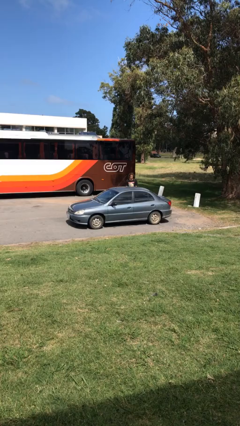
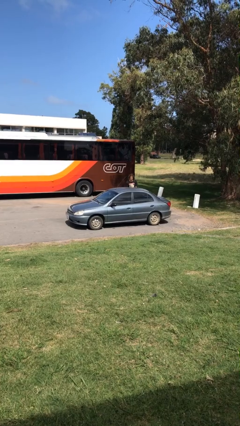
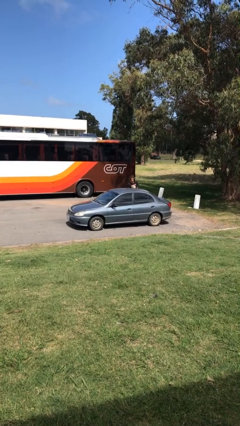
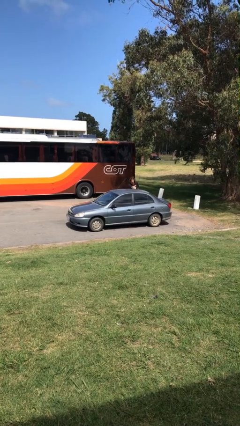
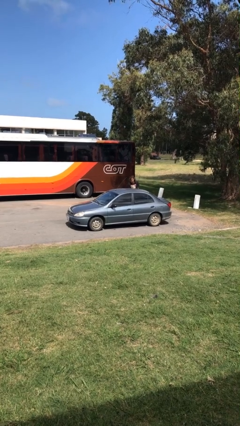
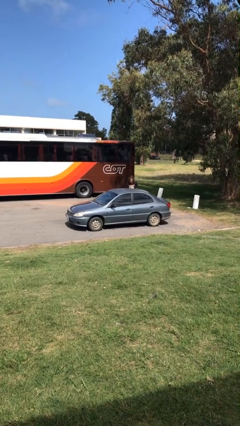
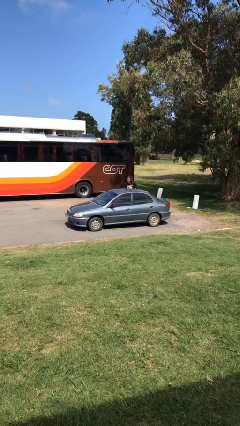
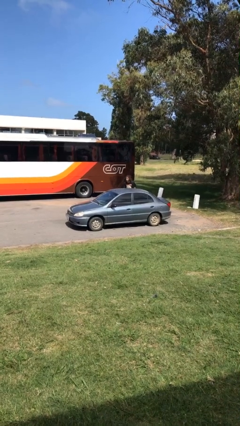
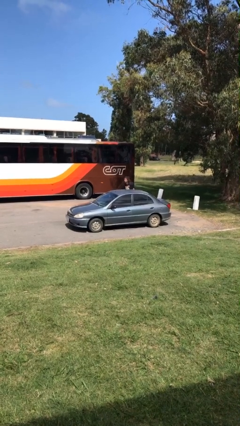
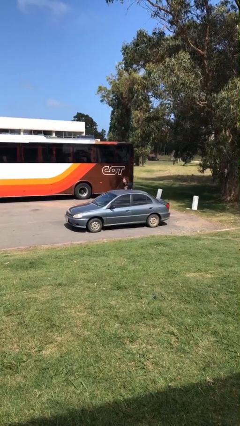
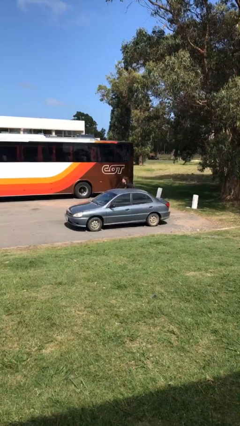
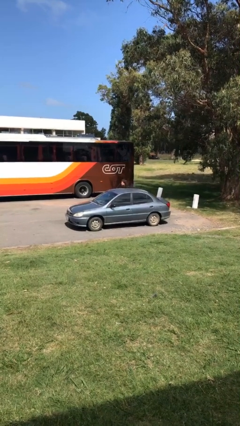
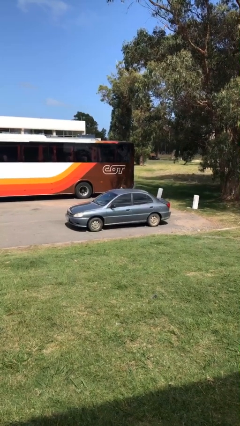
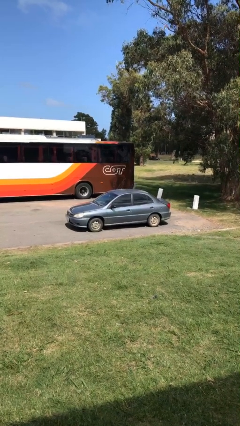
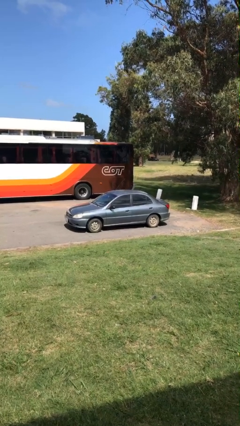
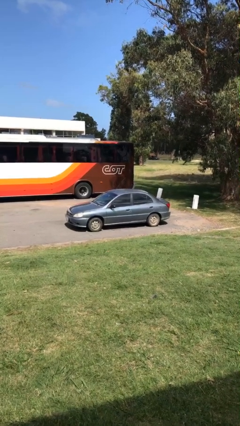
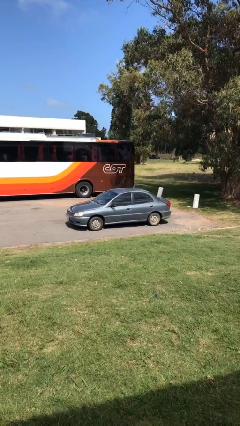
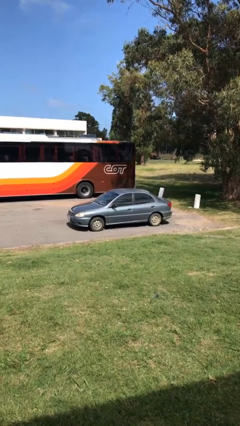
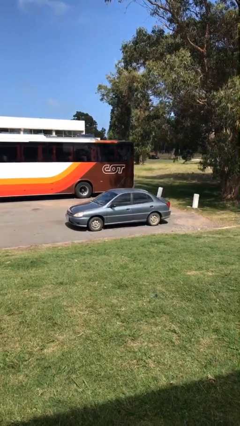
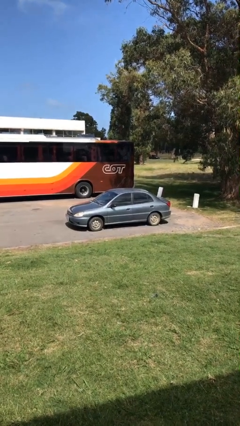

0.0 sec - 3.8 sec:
car picks up person

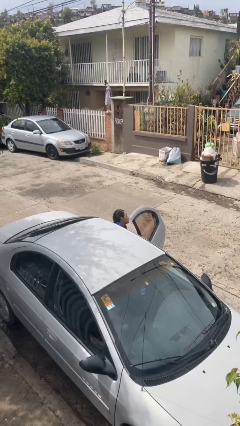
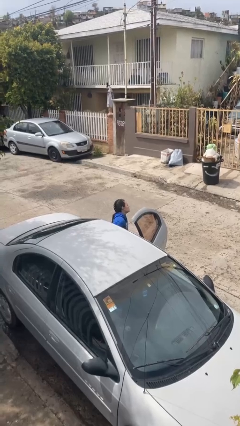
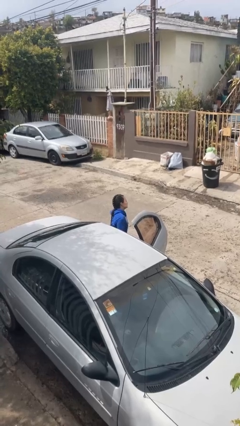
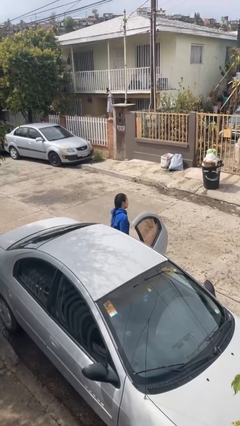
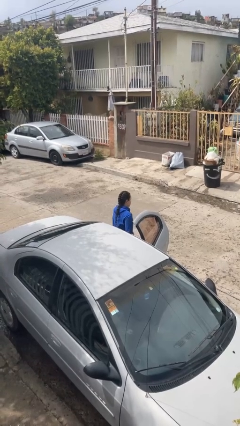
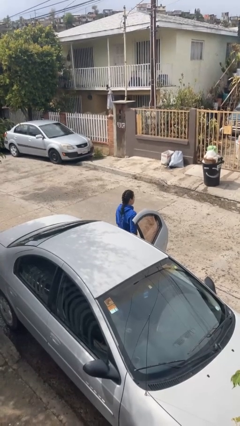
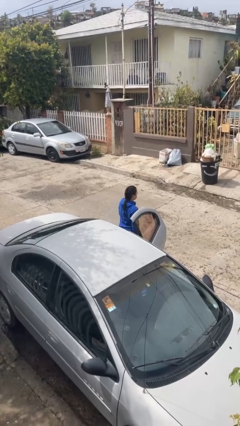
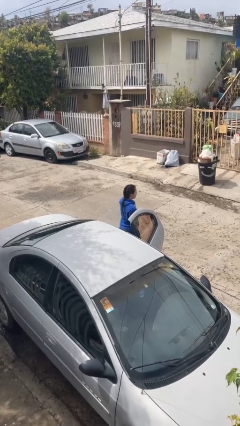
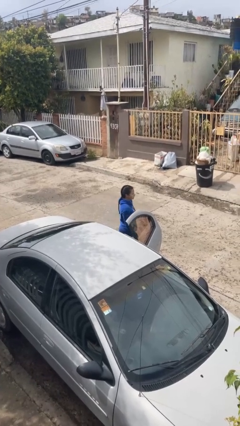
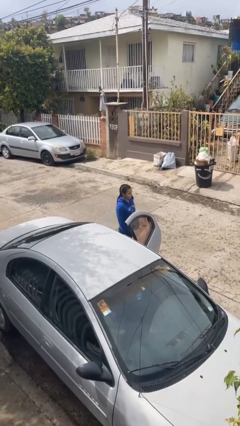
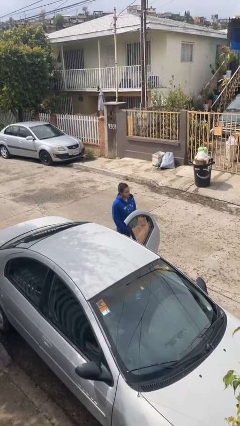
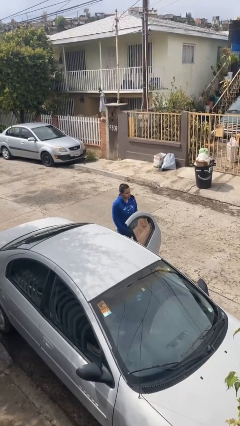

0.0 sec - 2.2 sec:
person exits car

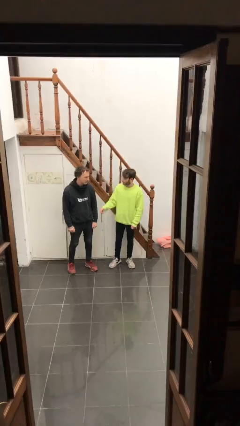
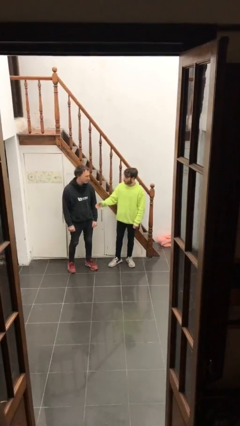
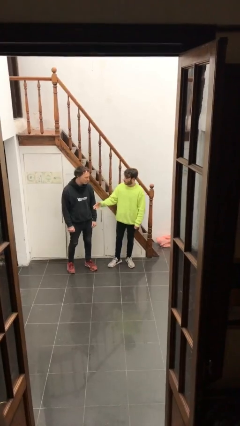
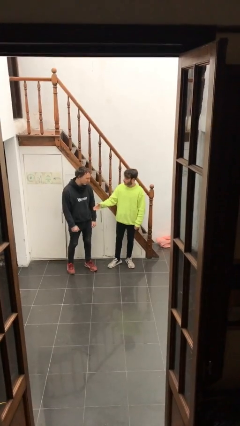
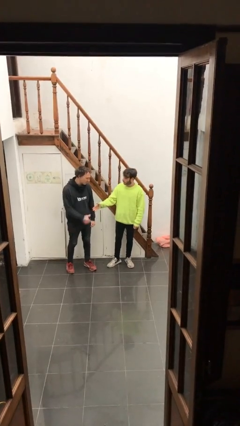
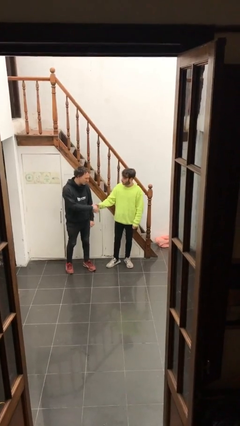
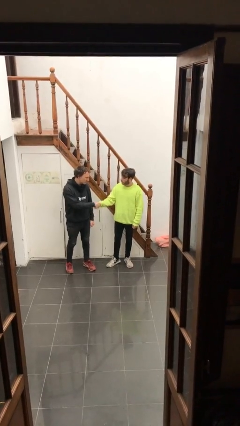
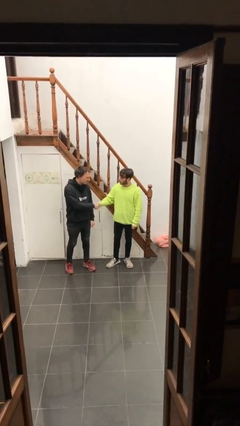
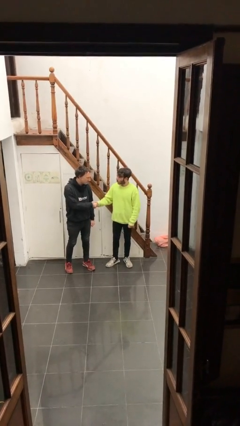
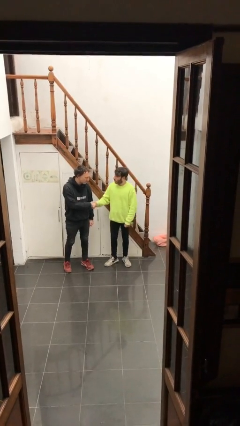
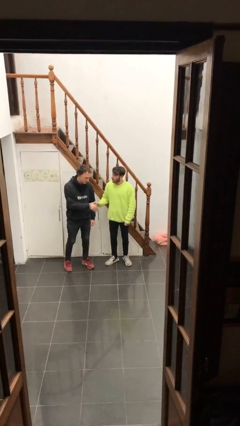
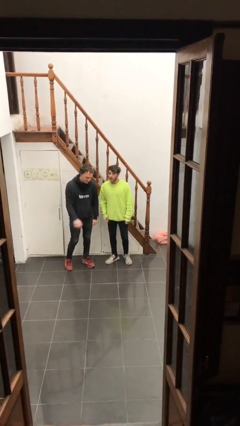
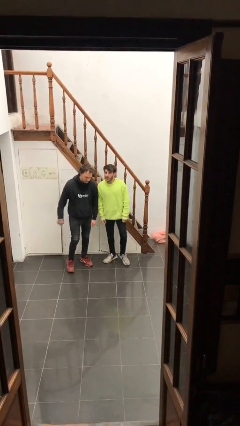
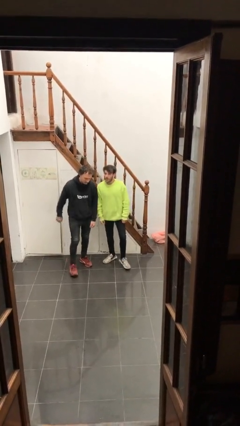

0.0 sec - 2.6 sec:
person shakes hand

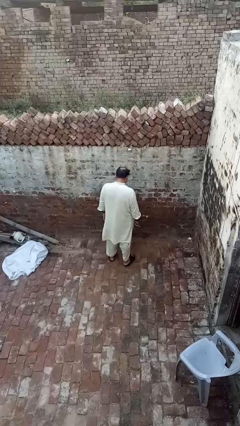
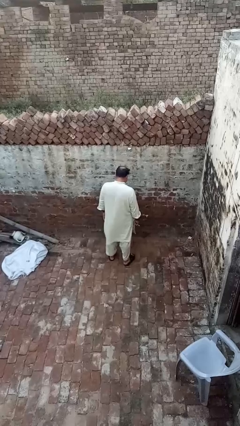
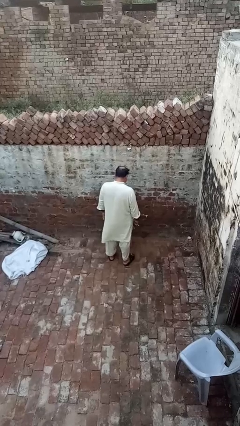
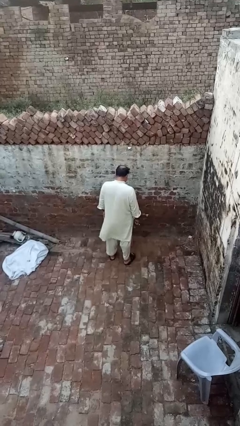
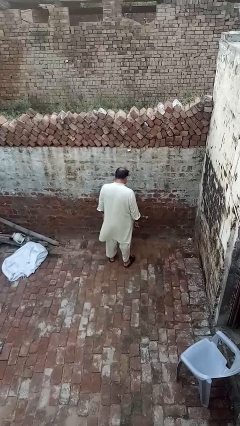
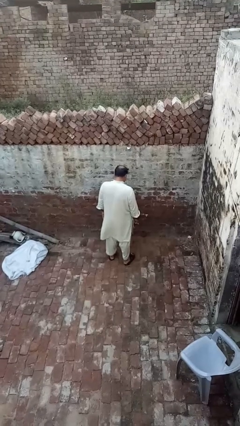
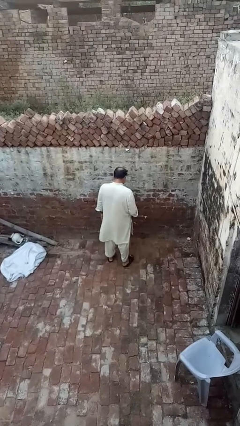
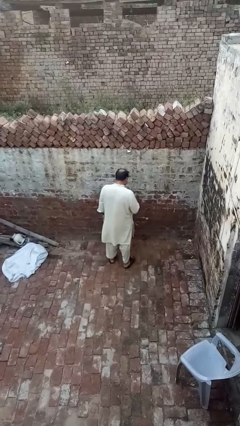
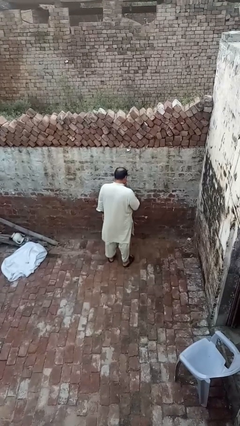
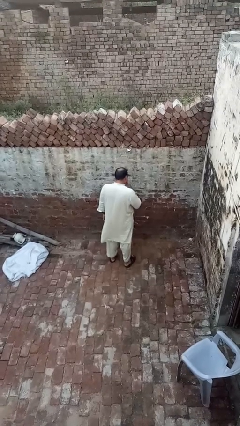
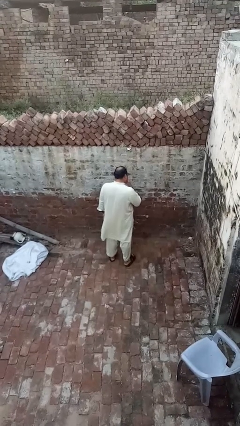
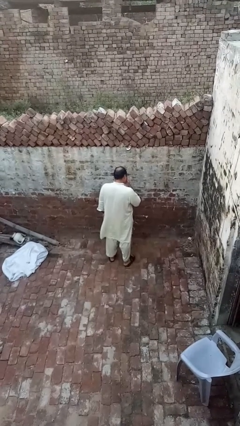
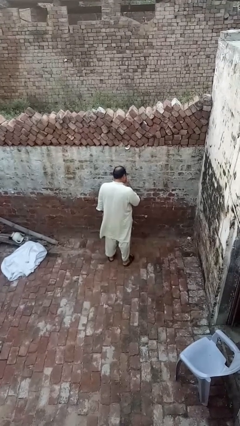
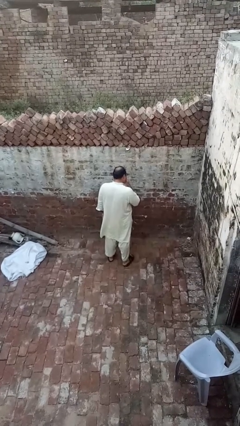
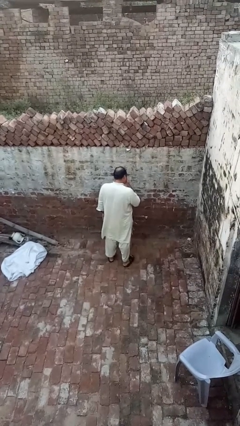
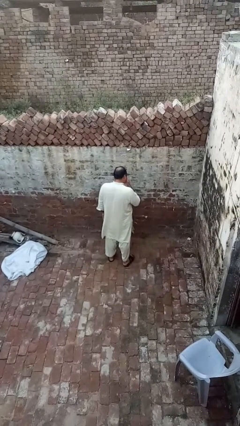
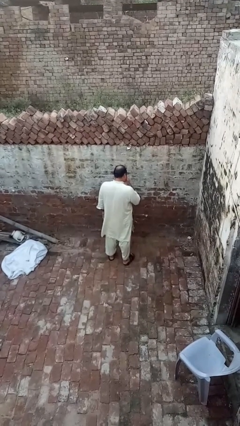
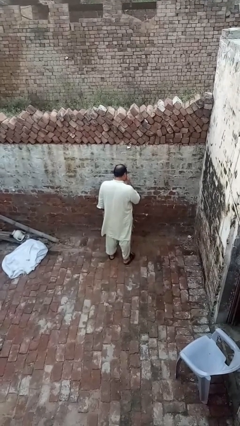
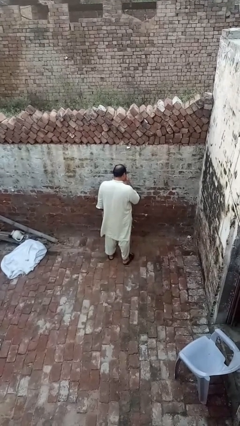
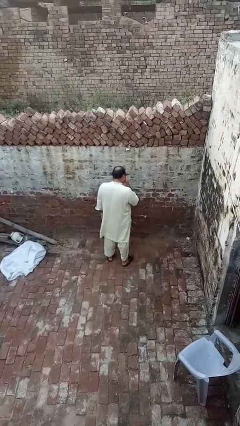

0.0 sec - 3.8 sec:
person brushes teeth

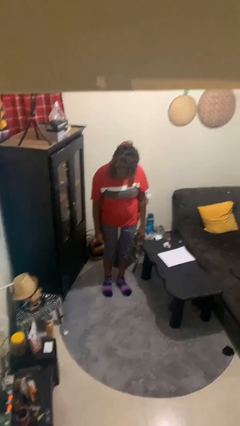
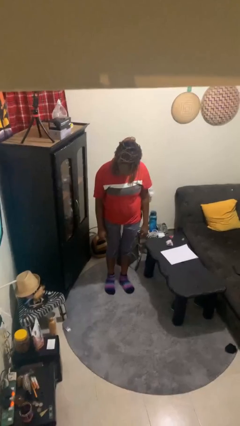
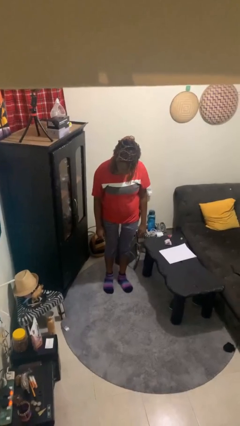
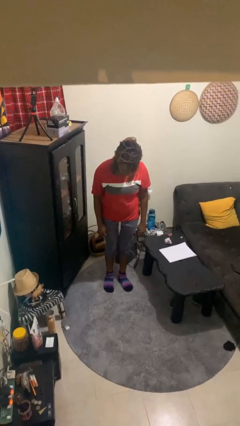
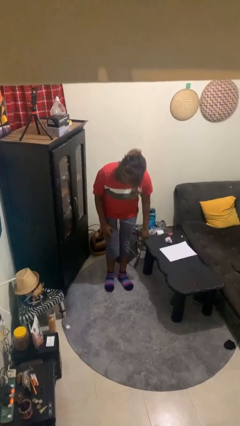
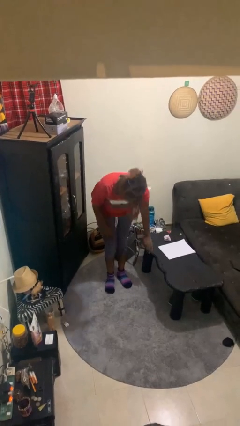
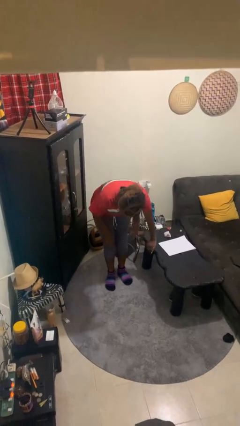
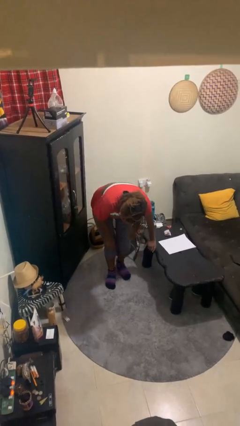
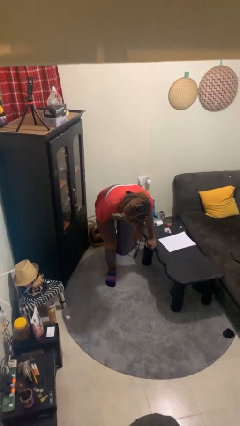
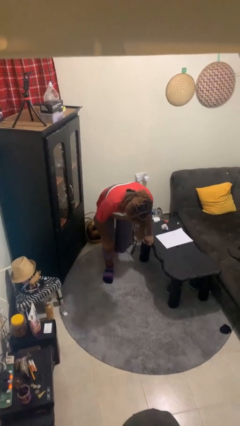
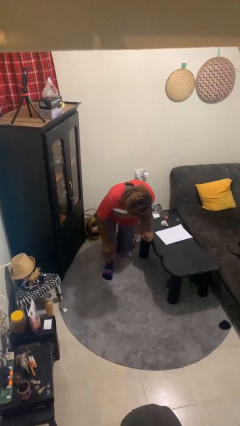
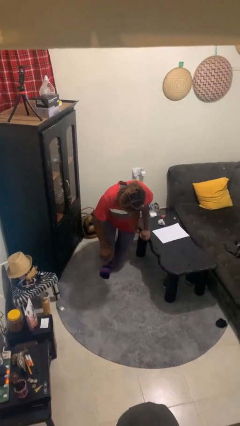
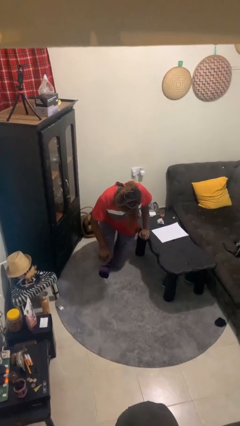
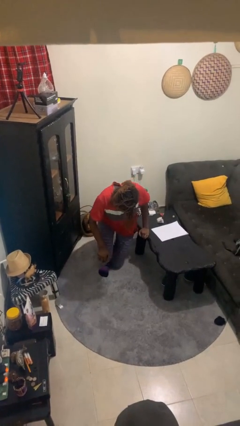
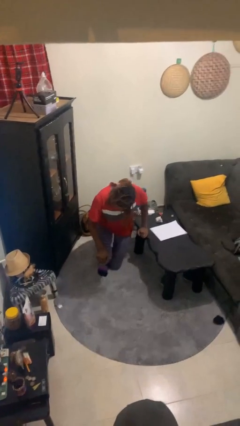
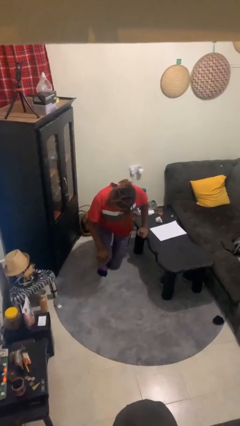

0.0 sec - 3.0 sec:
person kneels

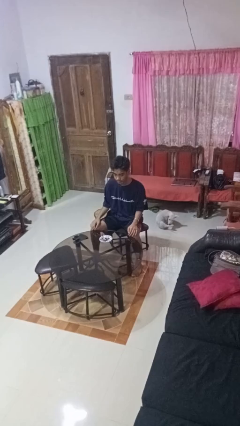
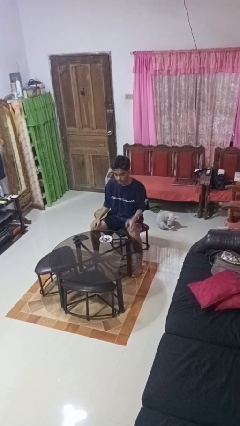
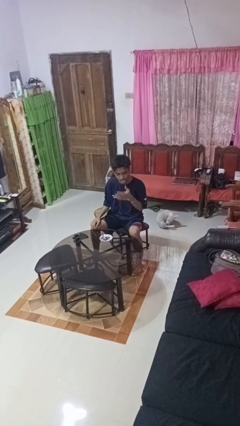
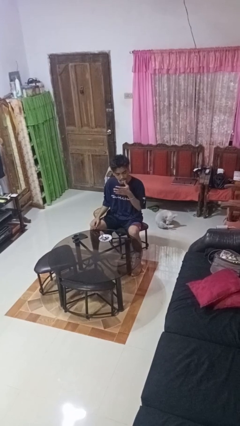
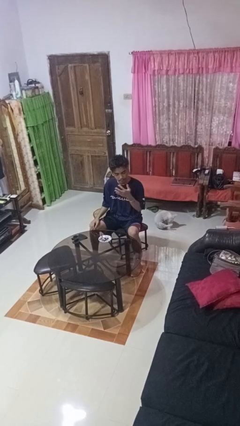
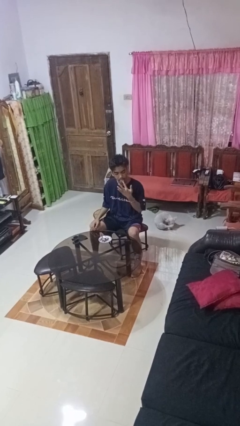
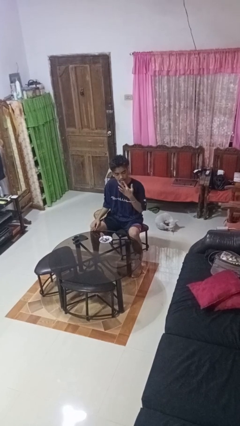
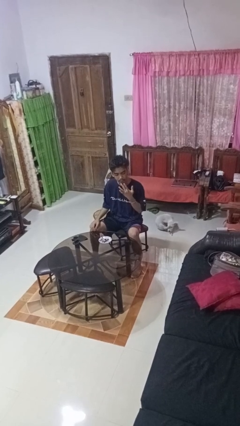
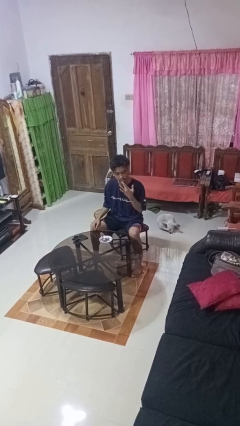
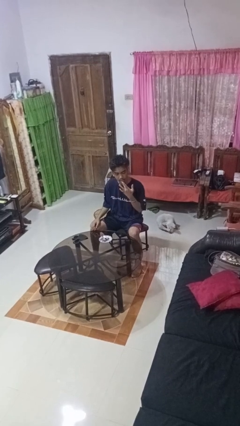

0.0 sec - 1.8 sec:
person licks fingers
